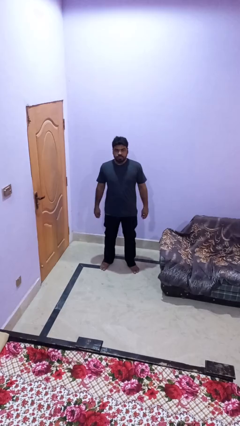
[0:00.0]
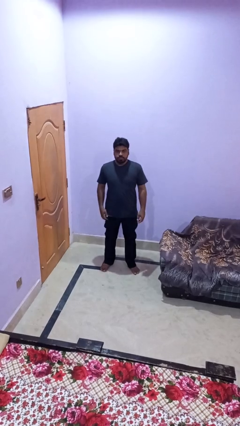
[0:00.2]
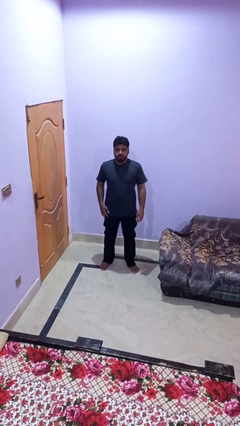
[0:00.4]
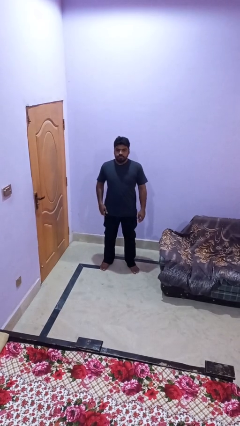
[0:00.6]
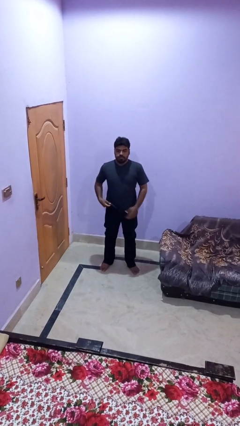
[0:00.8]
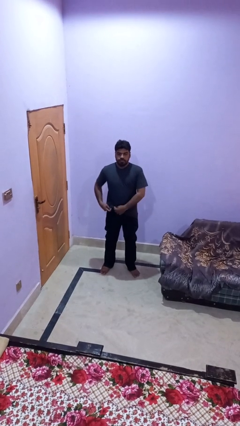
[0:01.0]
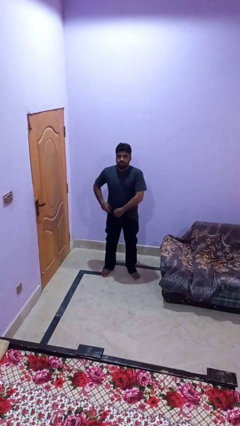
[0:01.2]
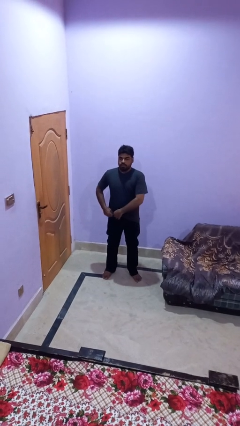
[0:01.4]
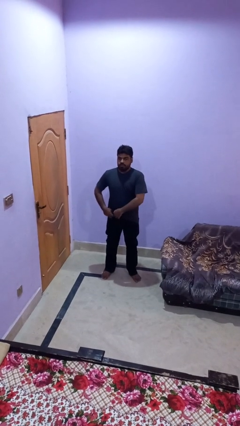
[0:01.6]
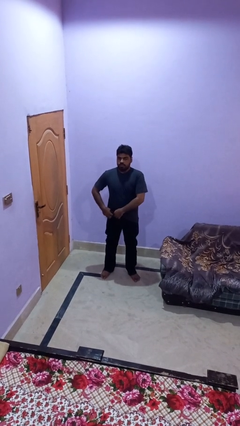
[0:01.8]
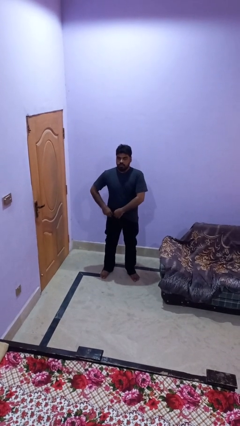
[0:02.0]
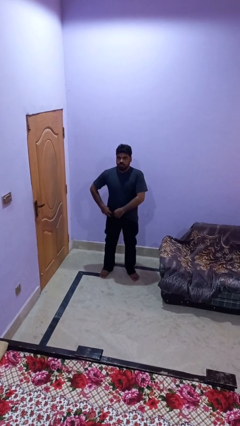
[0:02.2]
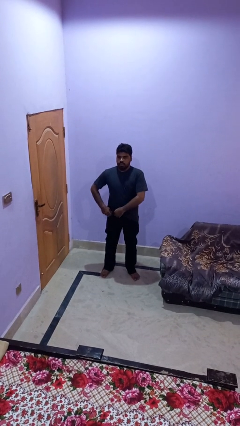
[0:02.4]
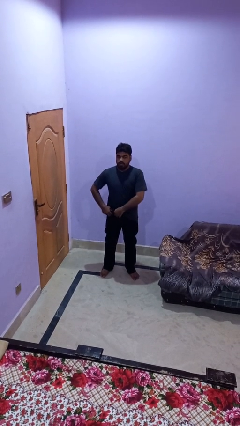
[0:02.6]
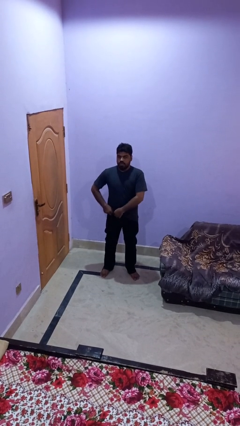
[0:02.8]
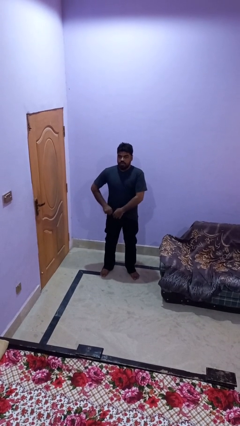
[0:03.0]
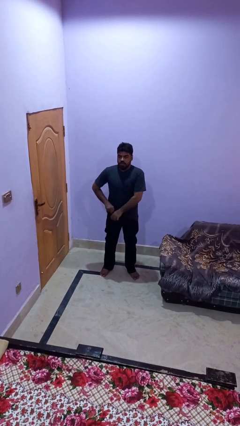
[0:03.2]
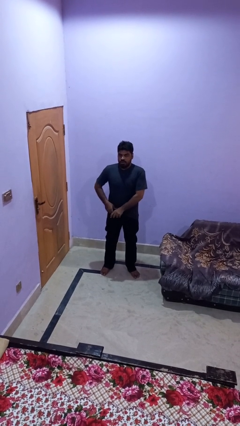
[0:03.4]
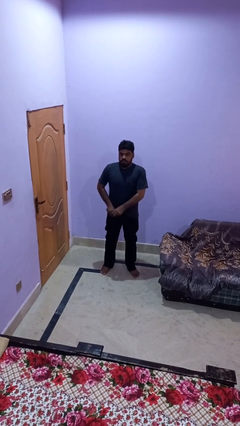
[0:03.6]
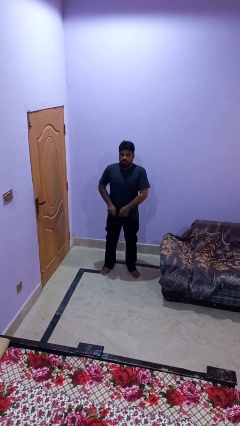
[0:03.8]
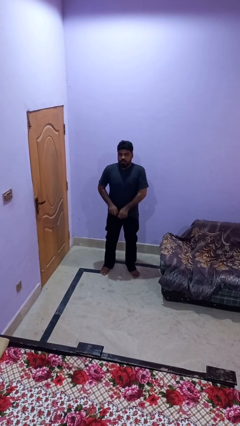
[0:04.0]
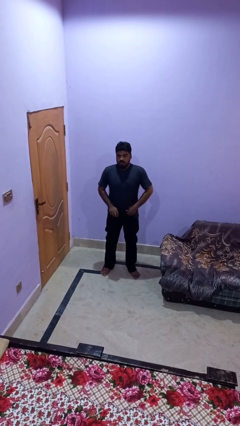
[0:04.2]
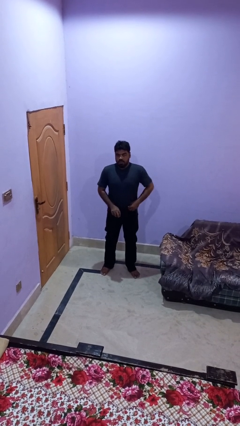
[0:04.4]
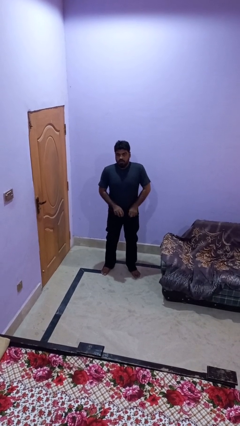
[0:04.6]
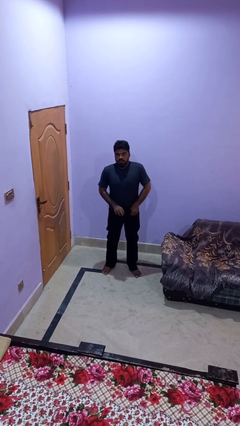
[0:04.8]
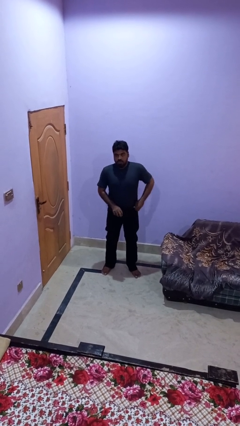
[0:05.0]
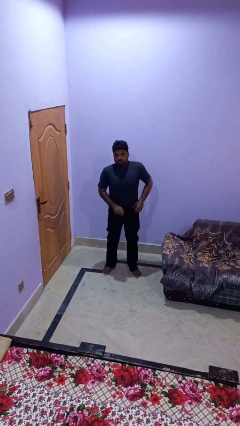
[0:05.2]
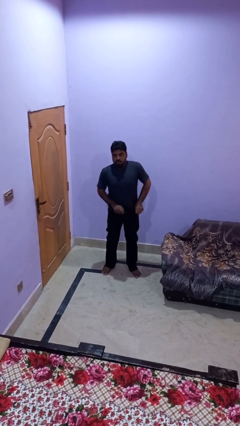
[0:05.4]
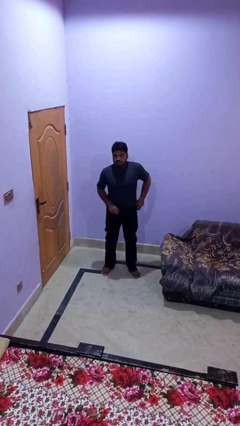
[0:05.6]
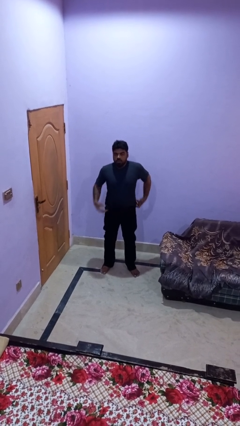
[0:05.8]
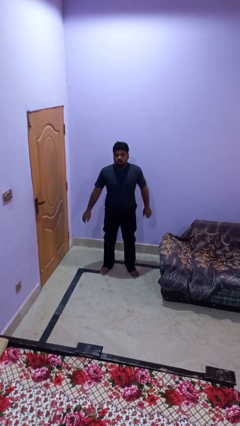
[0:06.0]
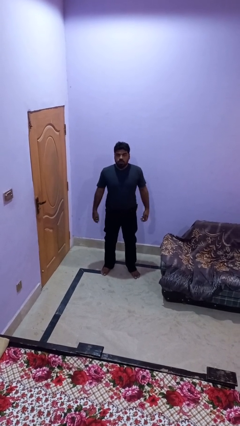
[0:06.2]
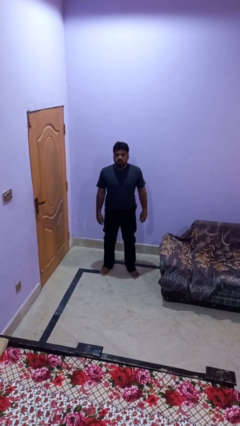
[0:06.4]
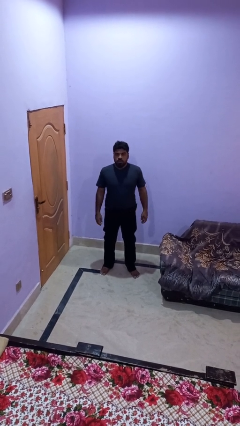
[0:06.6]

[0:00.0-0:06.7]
person tucks in shirt

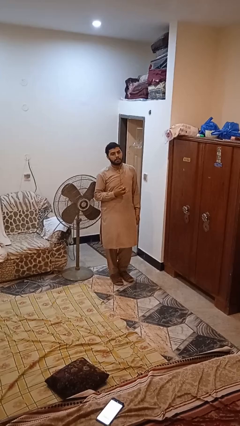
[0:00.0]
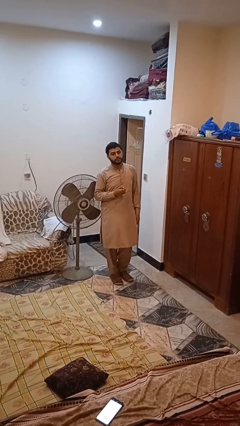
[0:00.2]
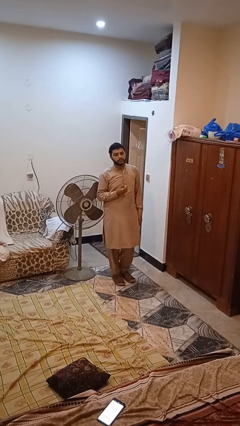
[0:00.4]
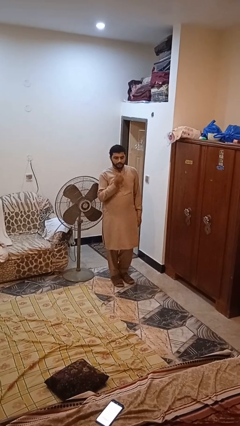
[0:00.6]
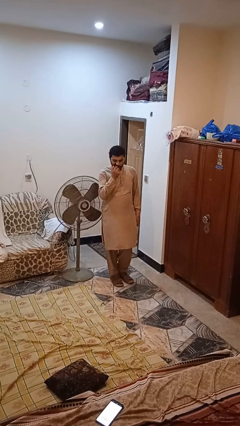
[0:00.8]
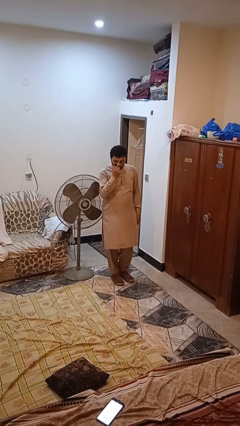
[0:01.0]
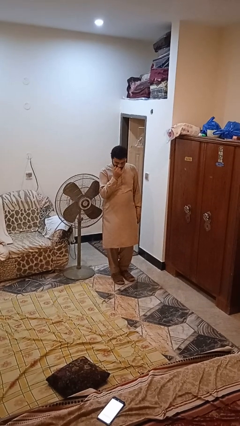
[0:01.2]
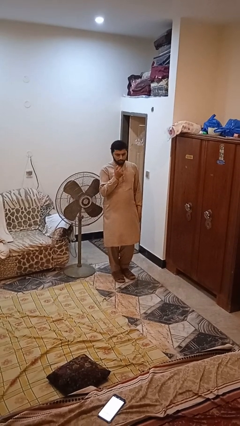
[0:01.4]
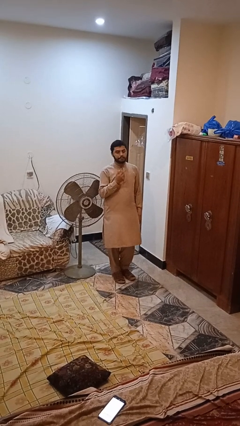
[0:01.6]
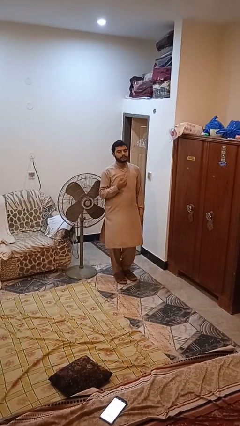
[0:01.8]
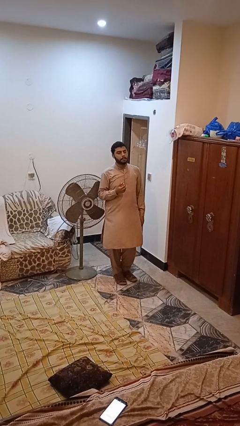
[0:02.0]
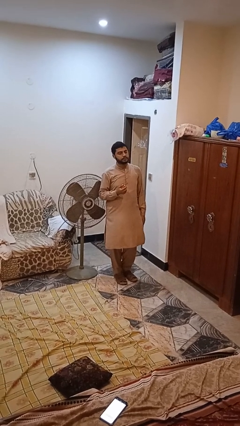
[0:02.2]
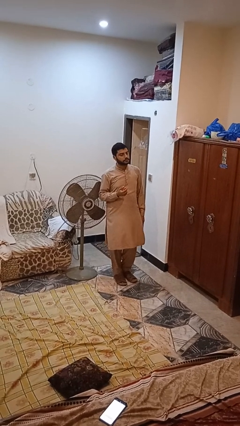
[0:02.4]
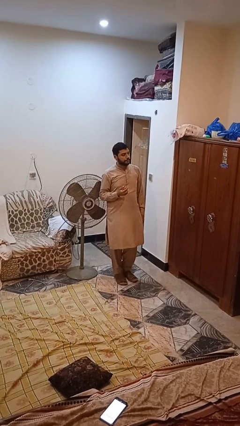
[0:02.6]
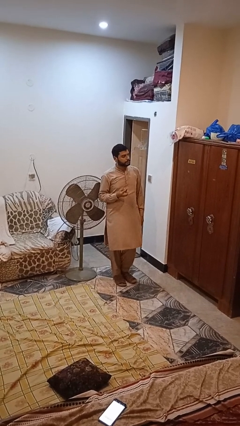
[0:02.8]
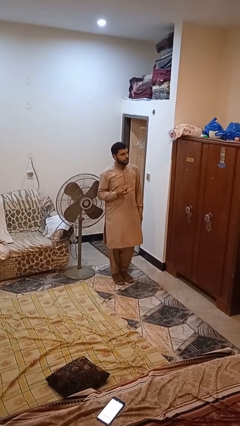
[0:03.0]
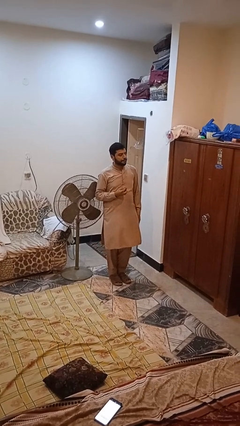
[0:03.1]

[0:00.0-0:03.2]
person eats apple

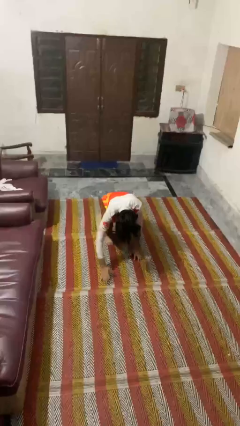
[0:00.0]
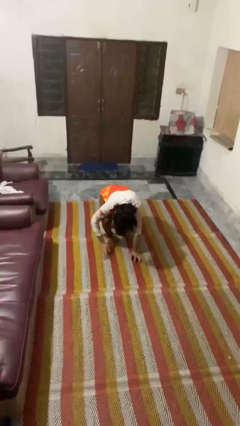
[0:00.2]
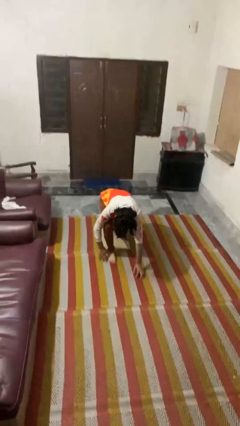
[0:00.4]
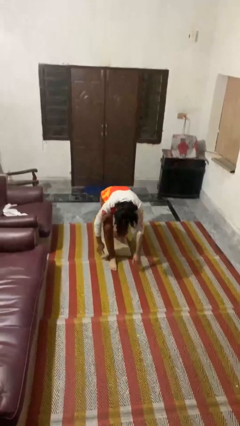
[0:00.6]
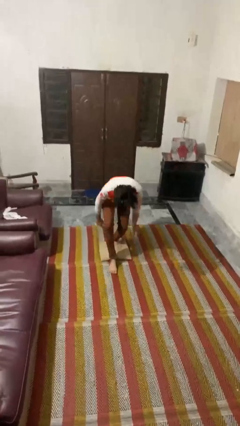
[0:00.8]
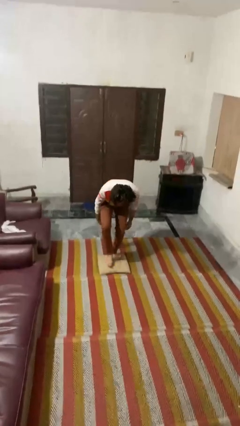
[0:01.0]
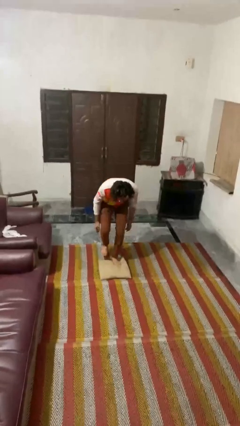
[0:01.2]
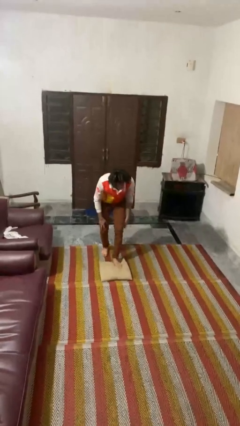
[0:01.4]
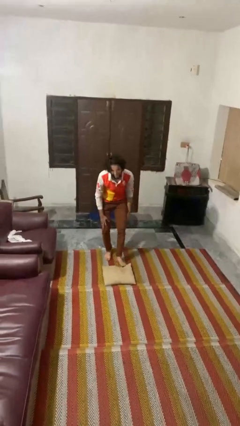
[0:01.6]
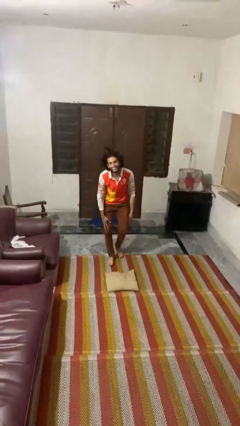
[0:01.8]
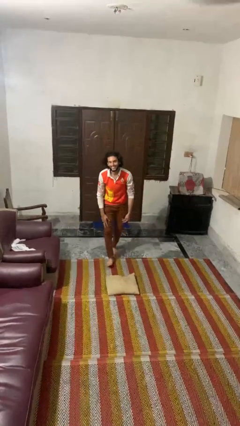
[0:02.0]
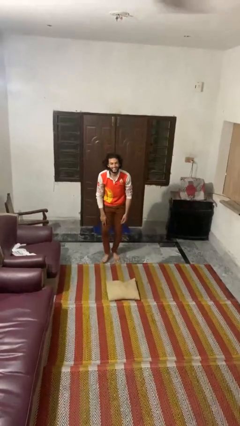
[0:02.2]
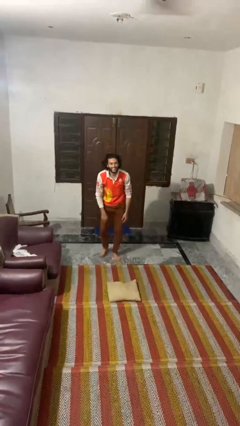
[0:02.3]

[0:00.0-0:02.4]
person stands up from floor

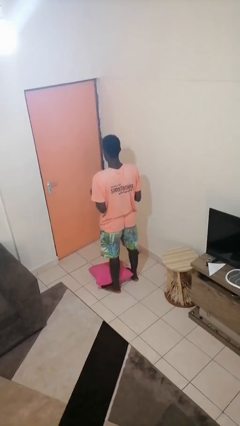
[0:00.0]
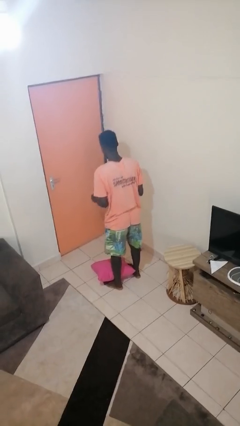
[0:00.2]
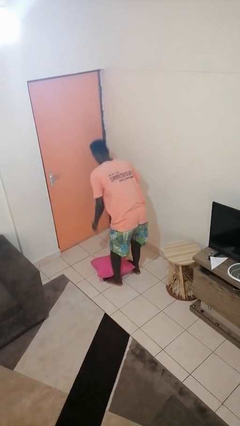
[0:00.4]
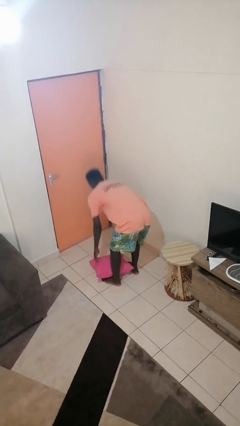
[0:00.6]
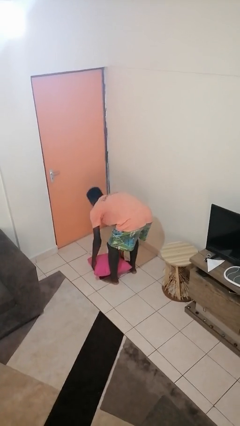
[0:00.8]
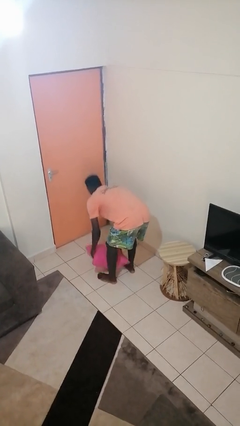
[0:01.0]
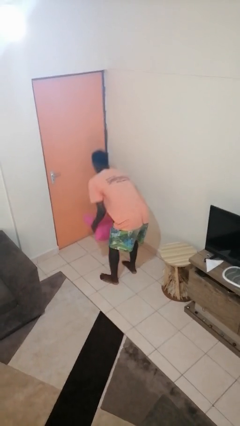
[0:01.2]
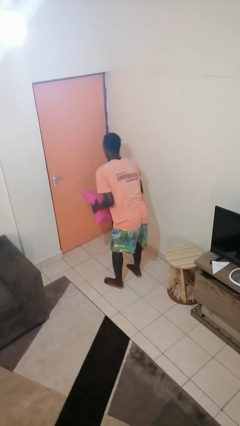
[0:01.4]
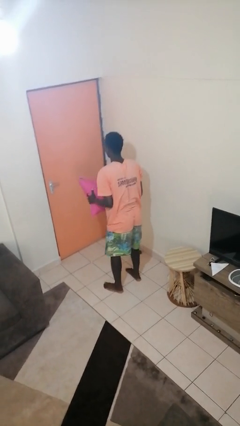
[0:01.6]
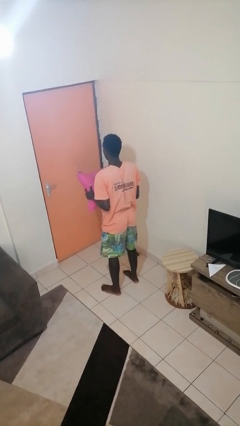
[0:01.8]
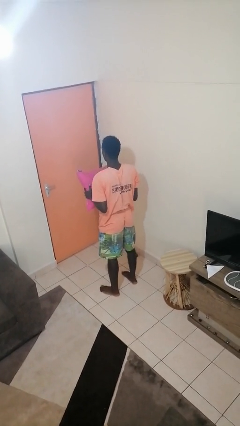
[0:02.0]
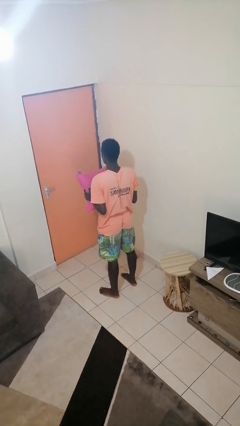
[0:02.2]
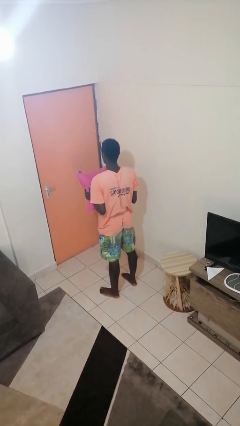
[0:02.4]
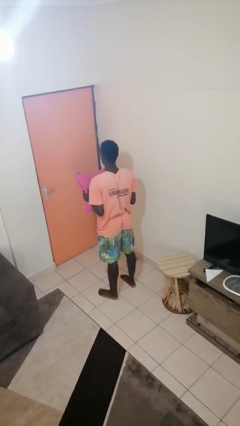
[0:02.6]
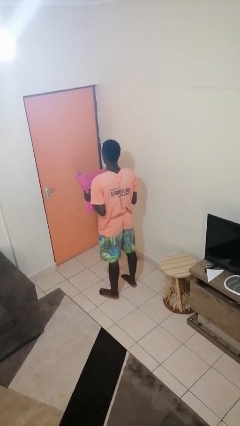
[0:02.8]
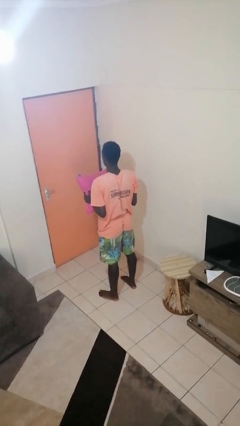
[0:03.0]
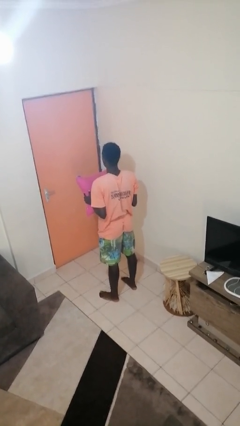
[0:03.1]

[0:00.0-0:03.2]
person picks up object from floor

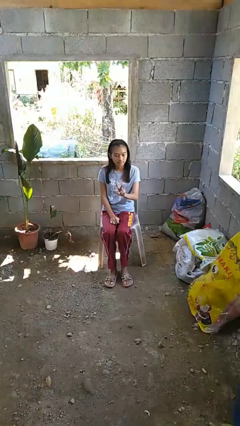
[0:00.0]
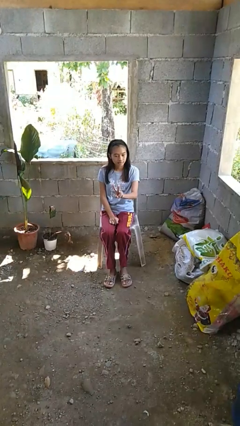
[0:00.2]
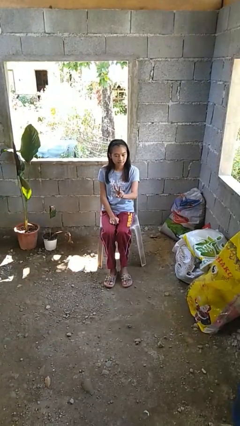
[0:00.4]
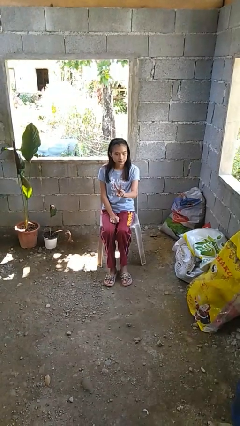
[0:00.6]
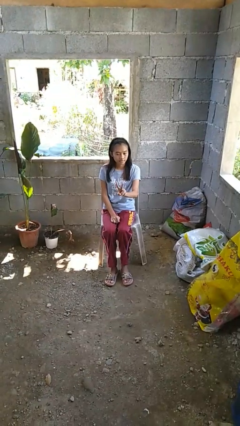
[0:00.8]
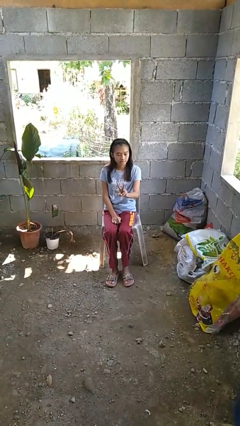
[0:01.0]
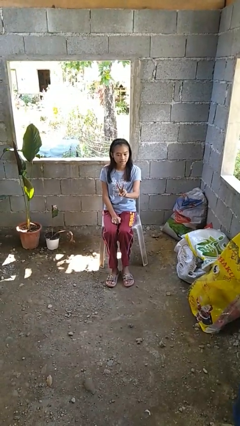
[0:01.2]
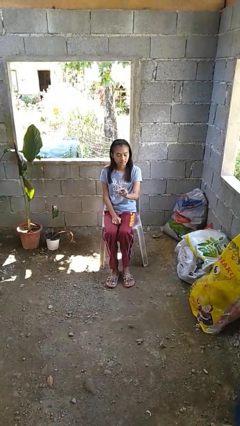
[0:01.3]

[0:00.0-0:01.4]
person gestures peace

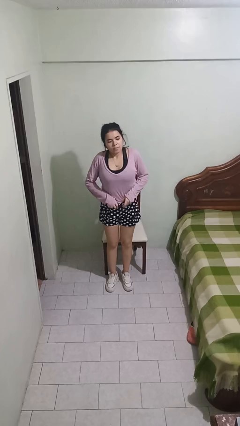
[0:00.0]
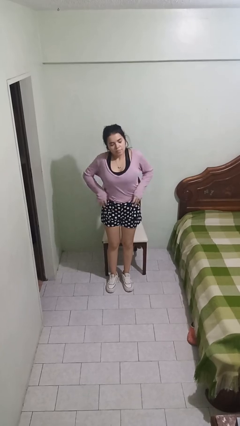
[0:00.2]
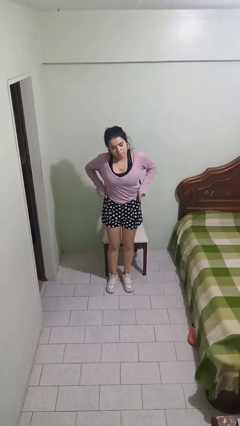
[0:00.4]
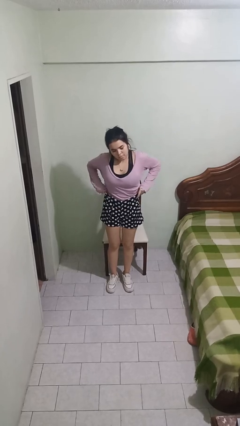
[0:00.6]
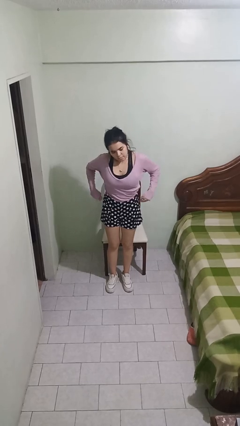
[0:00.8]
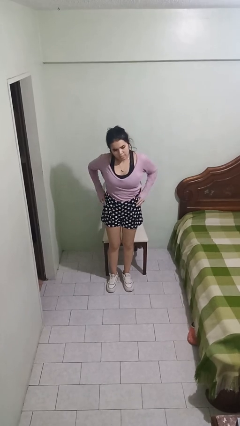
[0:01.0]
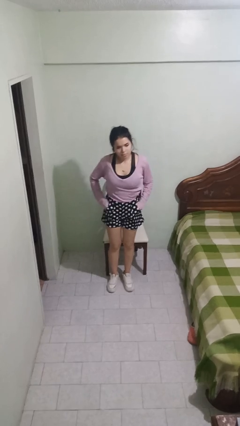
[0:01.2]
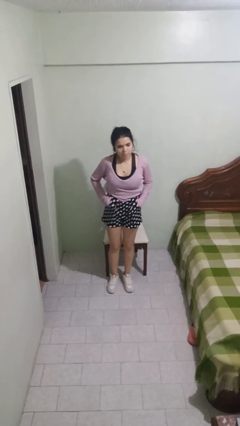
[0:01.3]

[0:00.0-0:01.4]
person hikes up pants
